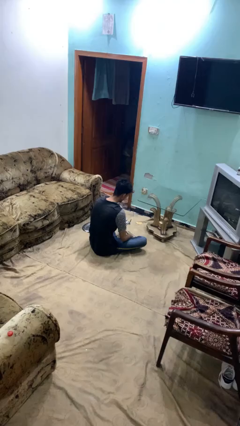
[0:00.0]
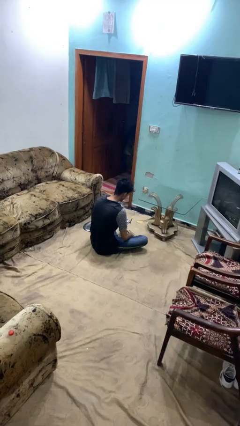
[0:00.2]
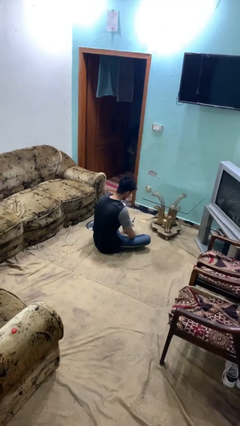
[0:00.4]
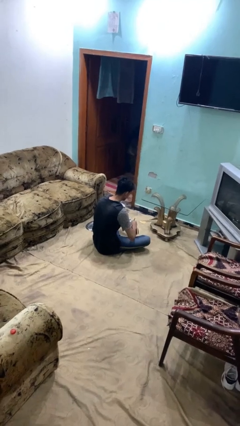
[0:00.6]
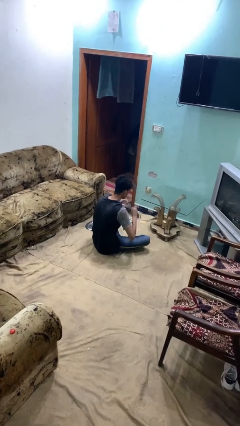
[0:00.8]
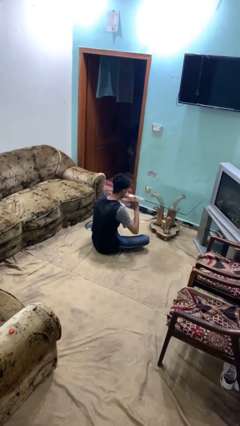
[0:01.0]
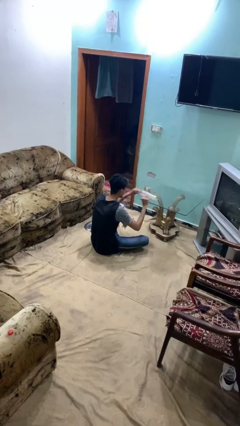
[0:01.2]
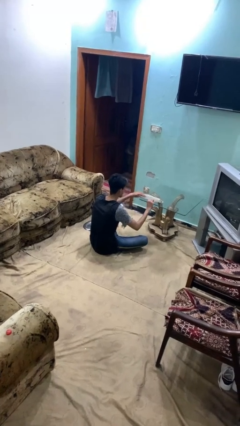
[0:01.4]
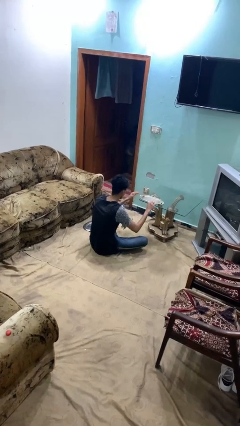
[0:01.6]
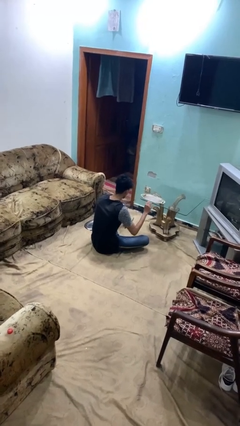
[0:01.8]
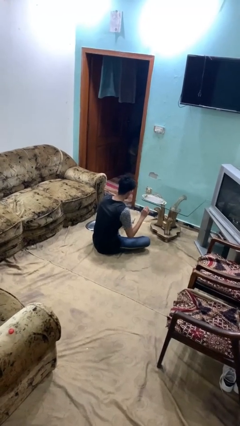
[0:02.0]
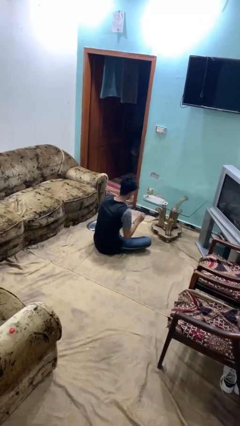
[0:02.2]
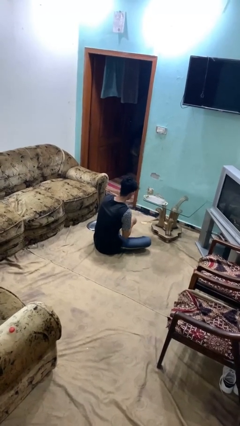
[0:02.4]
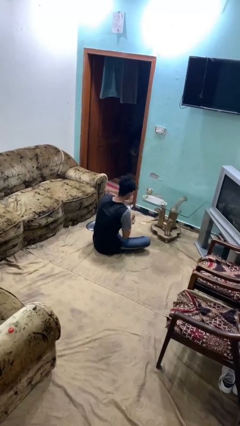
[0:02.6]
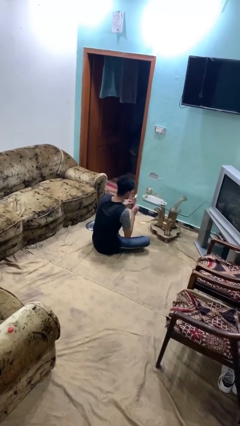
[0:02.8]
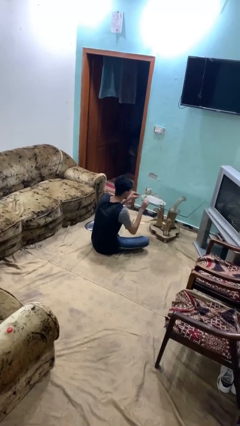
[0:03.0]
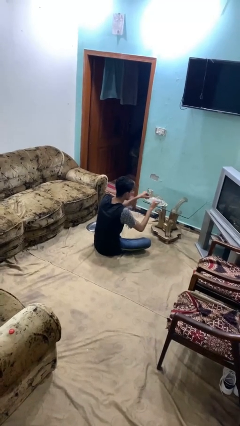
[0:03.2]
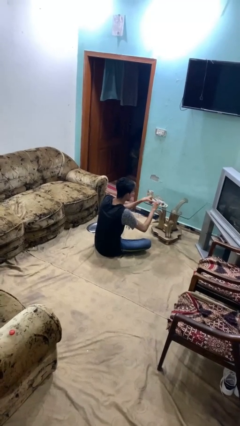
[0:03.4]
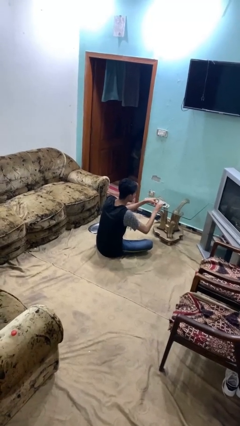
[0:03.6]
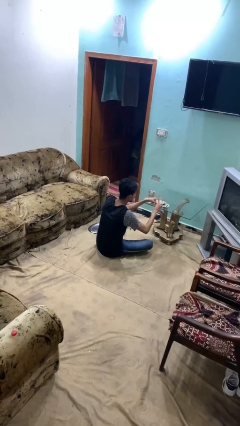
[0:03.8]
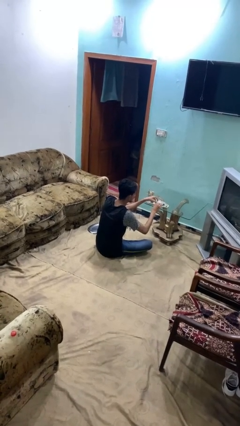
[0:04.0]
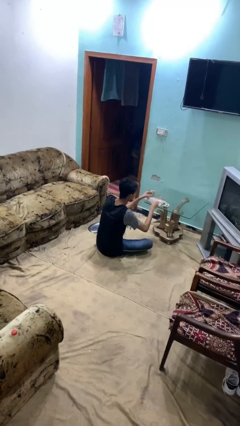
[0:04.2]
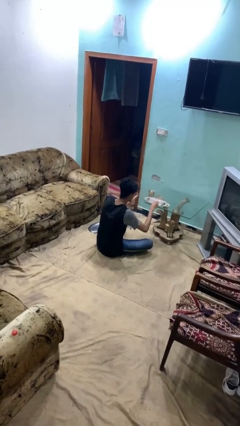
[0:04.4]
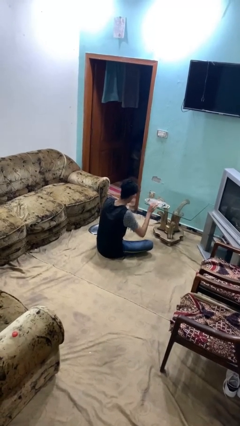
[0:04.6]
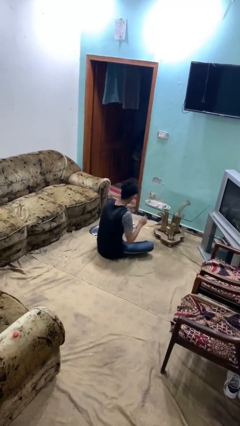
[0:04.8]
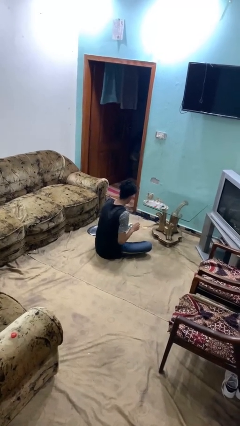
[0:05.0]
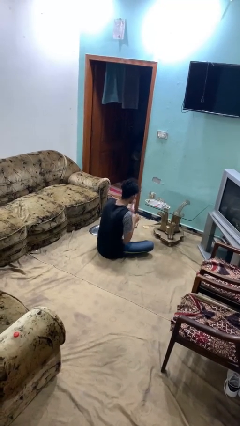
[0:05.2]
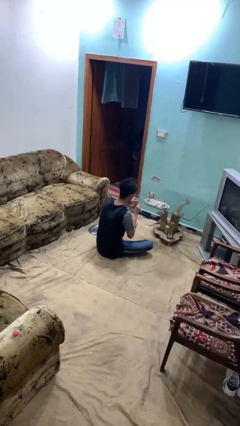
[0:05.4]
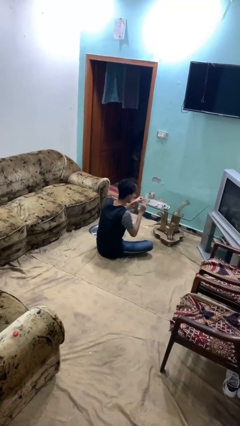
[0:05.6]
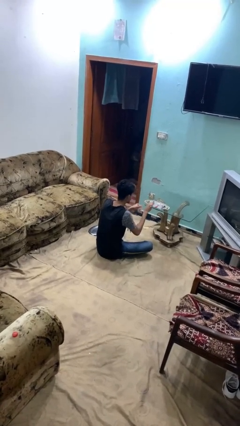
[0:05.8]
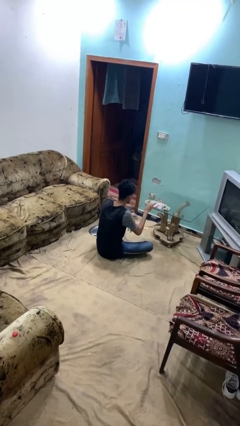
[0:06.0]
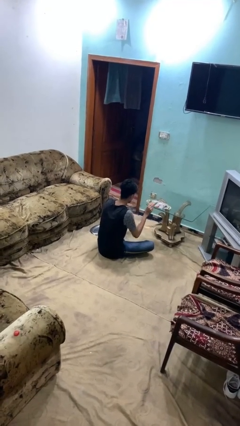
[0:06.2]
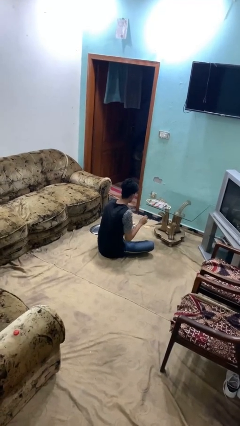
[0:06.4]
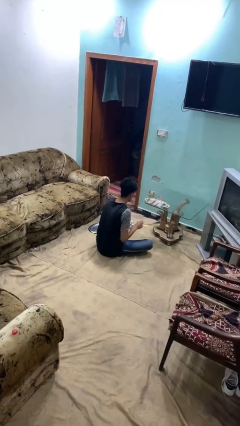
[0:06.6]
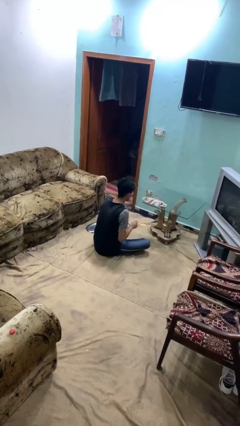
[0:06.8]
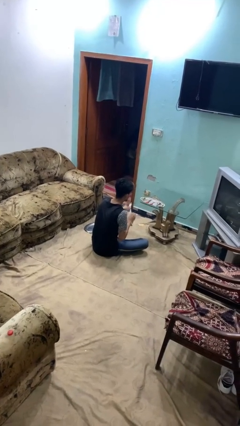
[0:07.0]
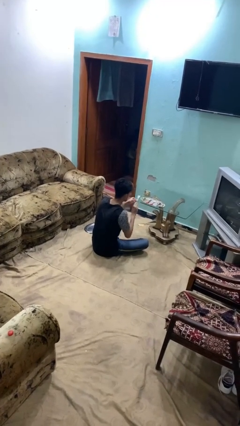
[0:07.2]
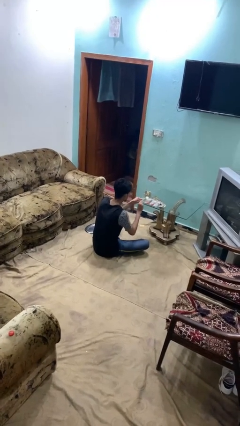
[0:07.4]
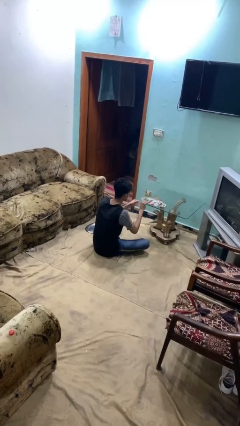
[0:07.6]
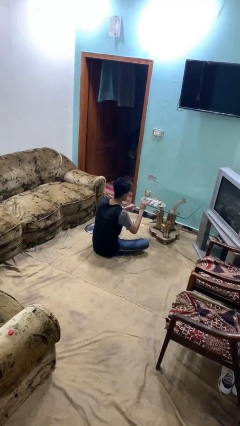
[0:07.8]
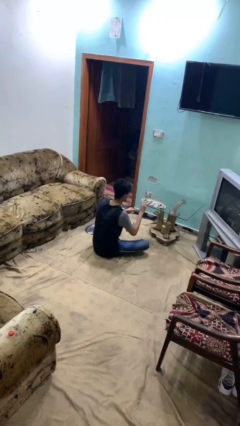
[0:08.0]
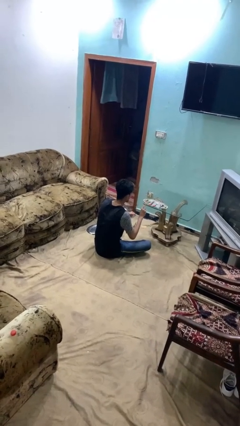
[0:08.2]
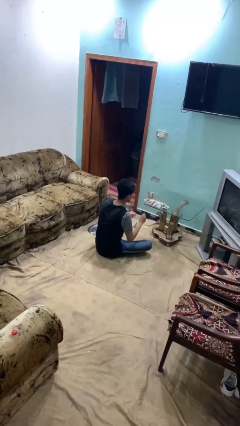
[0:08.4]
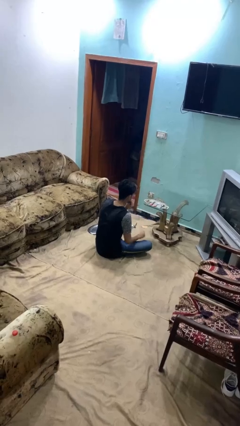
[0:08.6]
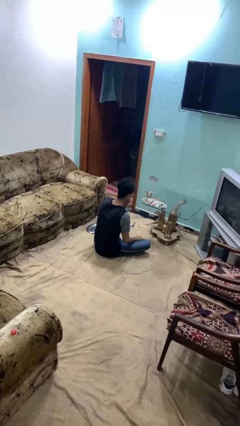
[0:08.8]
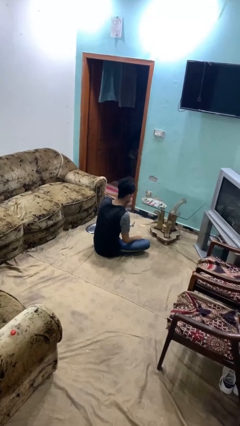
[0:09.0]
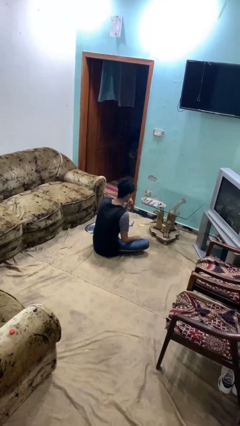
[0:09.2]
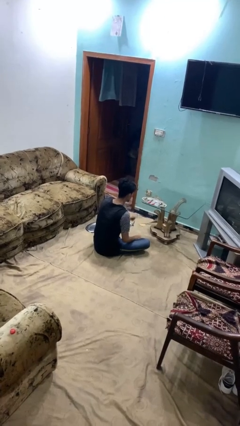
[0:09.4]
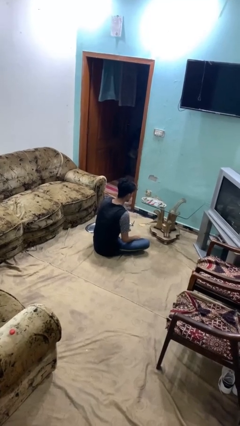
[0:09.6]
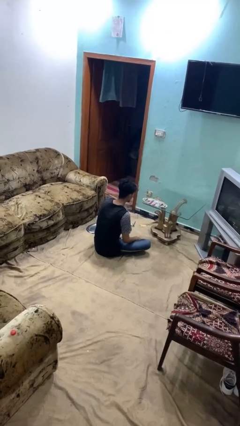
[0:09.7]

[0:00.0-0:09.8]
person sets table

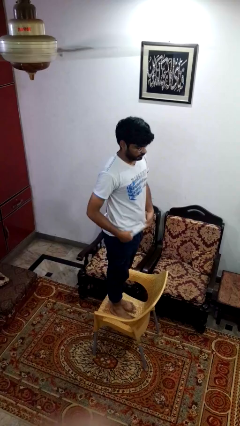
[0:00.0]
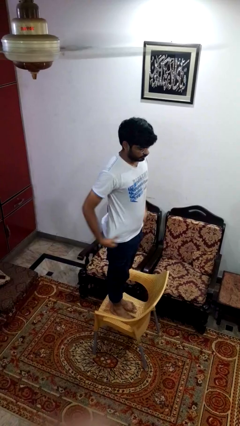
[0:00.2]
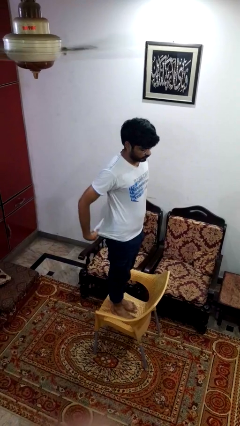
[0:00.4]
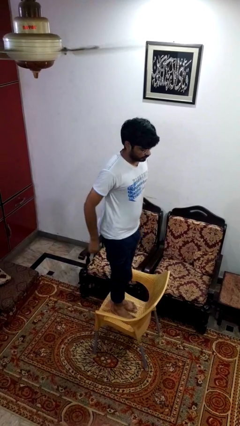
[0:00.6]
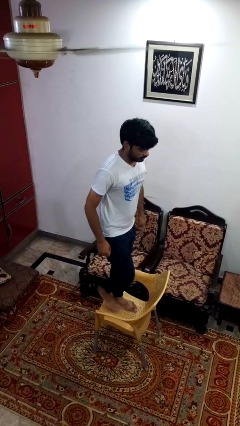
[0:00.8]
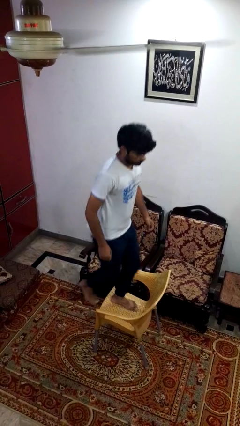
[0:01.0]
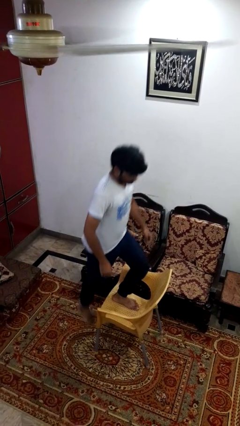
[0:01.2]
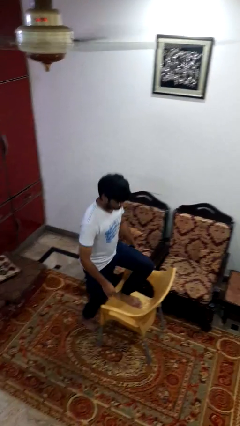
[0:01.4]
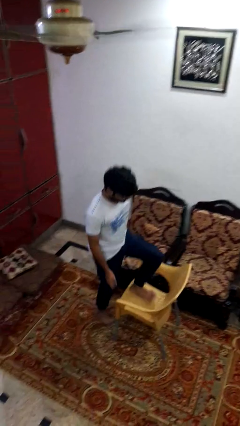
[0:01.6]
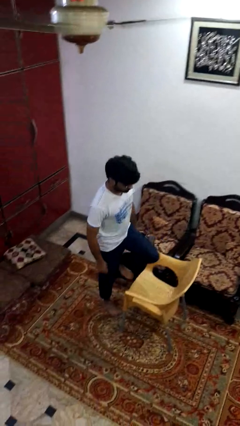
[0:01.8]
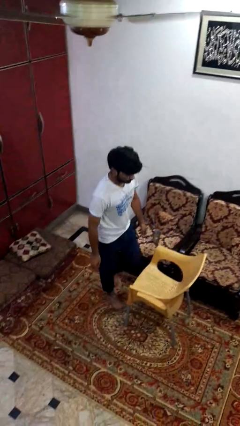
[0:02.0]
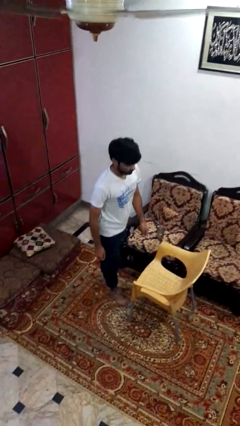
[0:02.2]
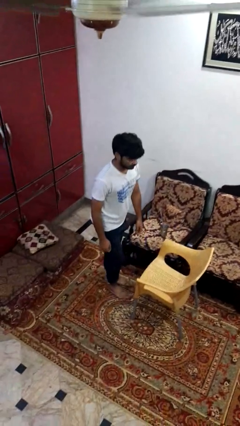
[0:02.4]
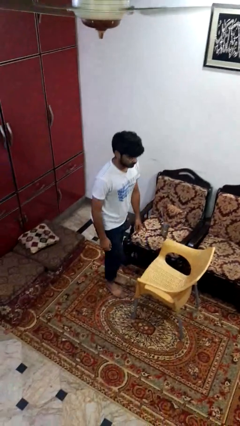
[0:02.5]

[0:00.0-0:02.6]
person climbs off chair

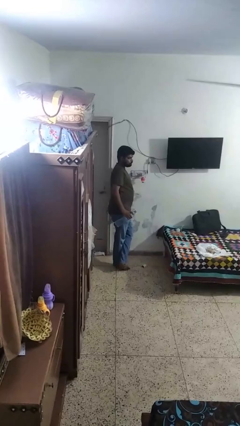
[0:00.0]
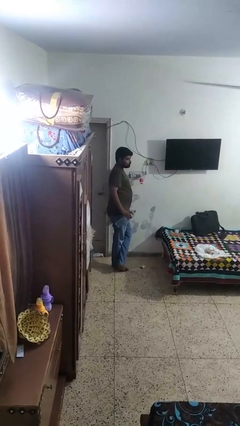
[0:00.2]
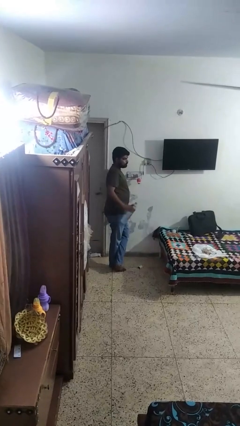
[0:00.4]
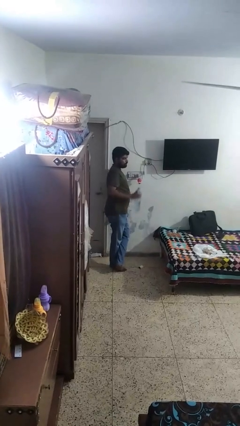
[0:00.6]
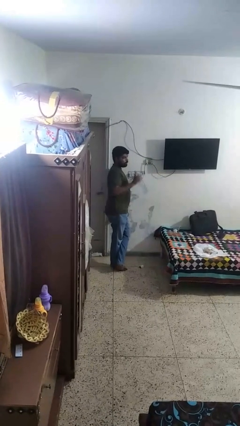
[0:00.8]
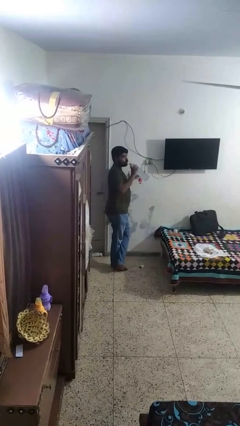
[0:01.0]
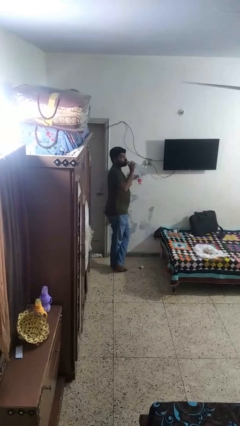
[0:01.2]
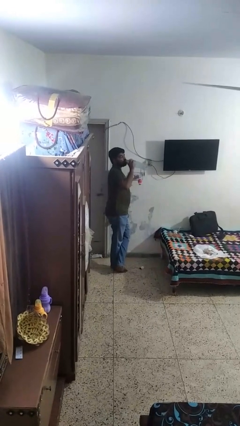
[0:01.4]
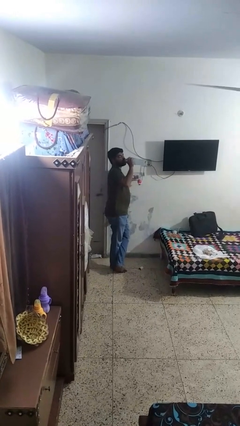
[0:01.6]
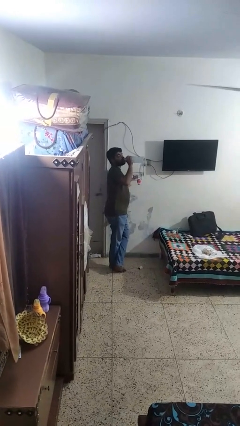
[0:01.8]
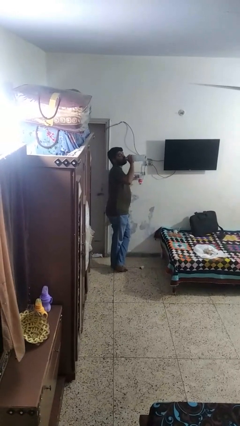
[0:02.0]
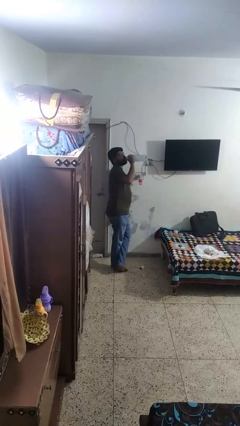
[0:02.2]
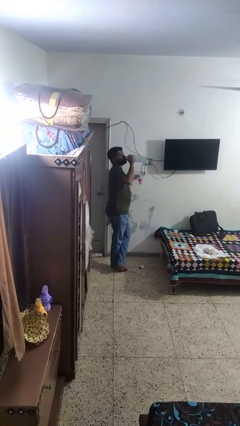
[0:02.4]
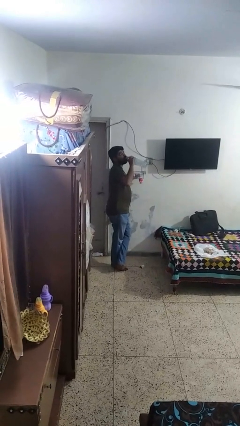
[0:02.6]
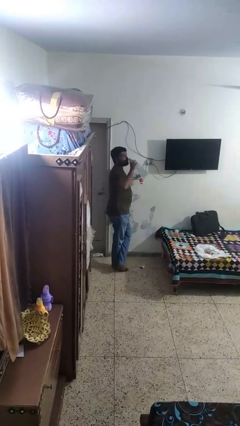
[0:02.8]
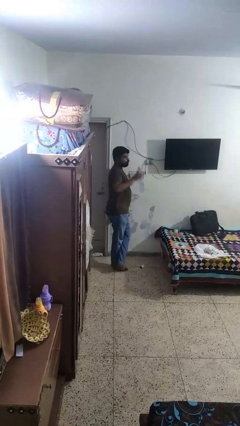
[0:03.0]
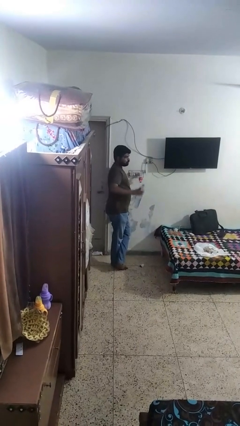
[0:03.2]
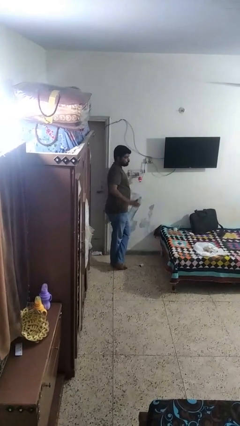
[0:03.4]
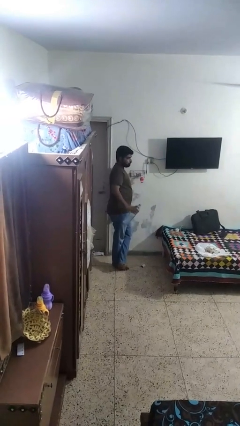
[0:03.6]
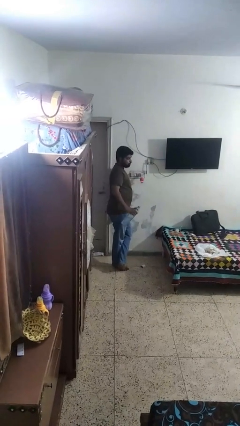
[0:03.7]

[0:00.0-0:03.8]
person drinks from bottle

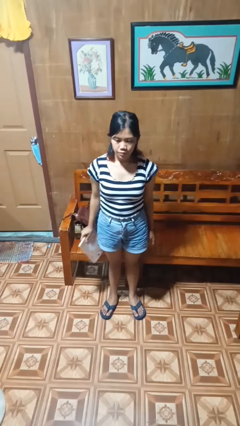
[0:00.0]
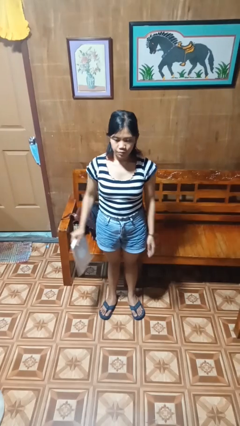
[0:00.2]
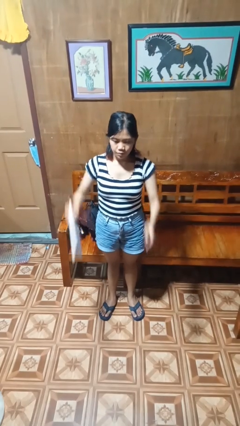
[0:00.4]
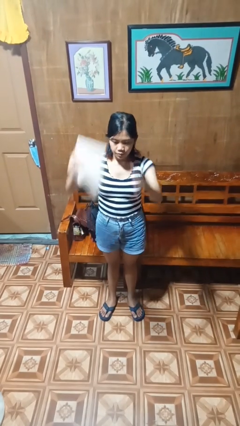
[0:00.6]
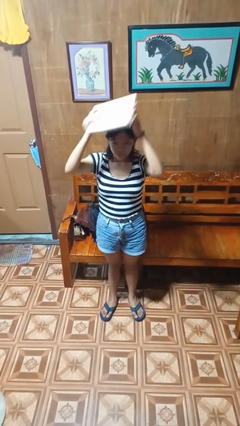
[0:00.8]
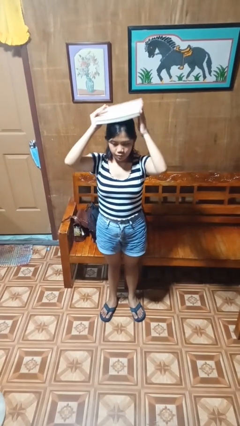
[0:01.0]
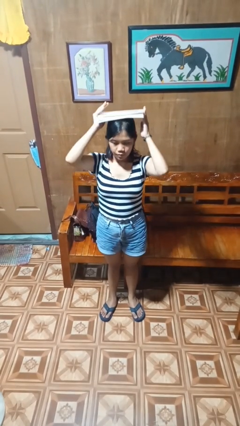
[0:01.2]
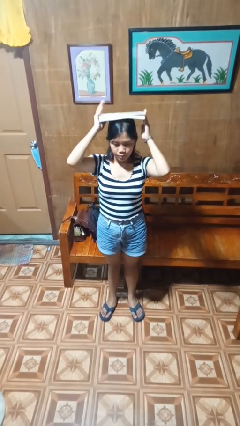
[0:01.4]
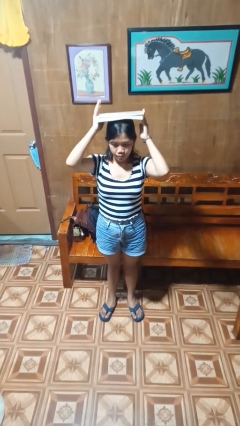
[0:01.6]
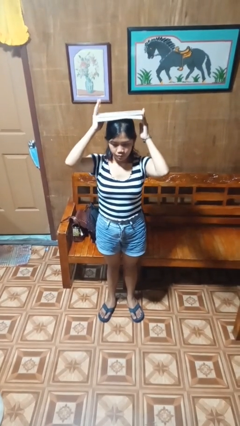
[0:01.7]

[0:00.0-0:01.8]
person holds object above head

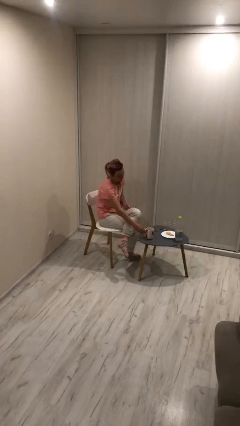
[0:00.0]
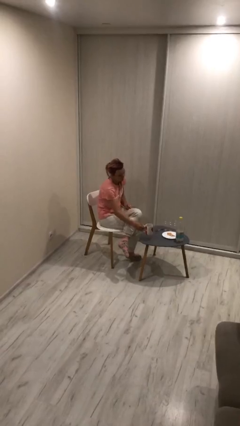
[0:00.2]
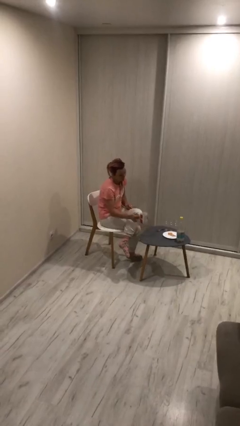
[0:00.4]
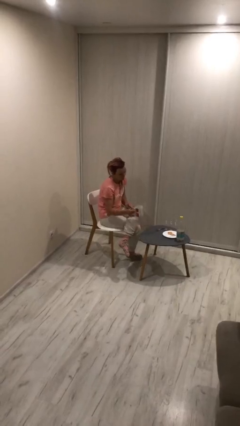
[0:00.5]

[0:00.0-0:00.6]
person picks up object from table
